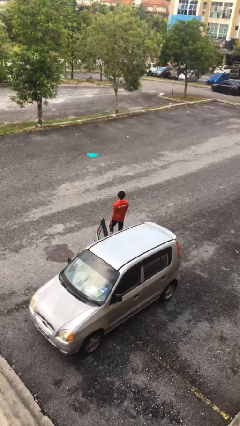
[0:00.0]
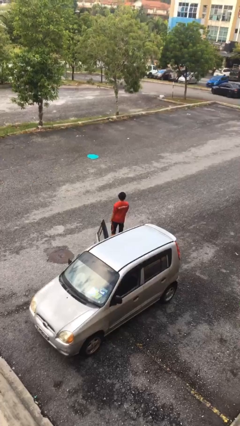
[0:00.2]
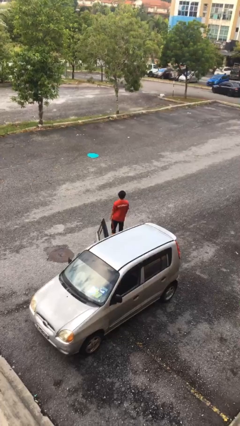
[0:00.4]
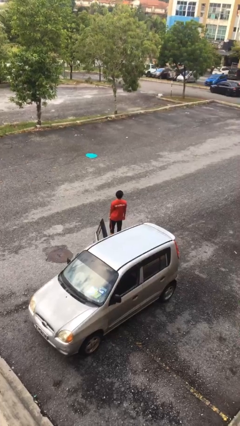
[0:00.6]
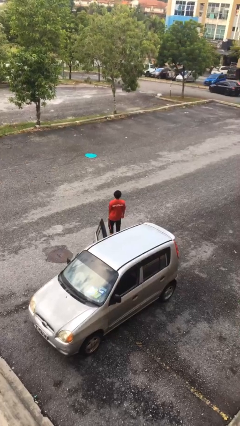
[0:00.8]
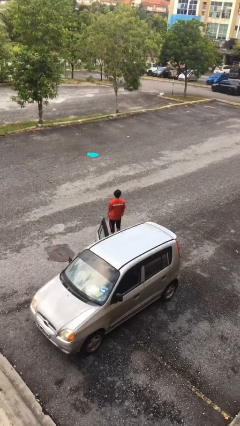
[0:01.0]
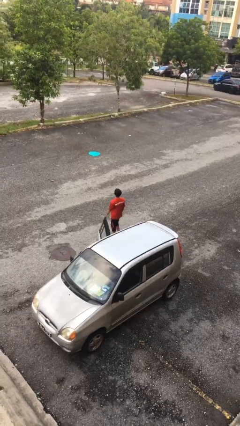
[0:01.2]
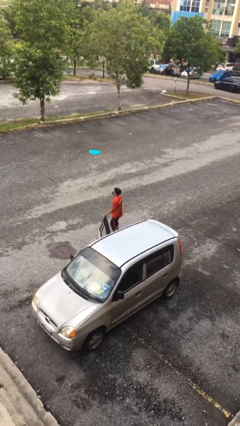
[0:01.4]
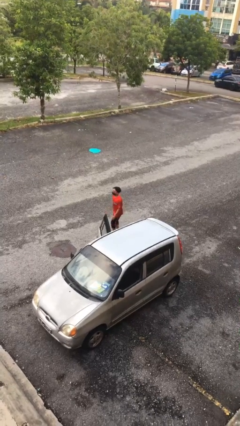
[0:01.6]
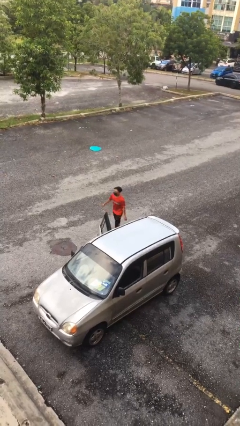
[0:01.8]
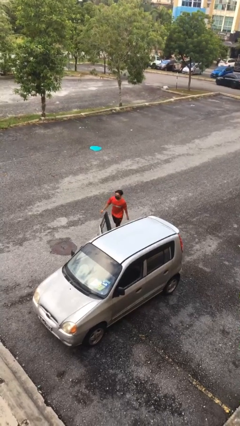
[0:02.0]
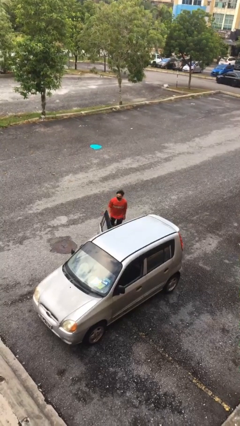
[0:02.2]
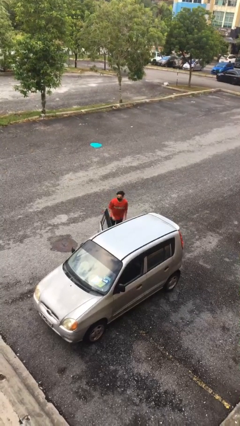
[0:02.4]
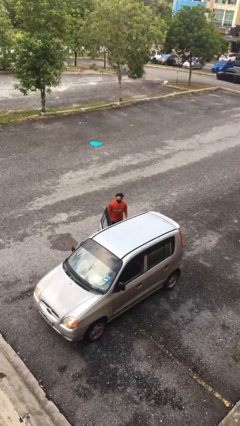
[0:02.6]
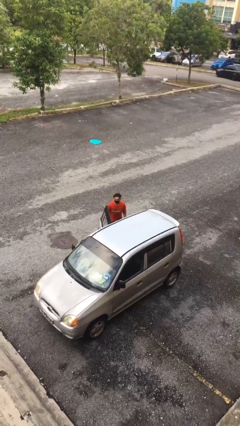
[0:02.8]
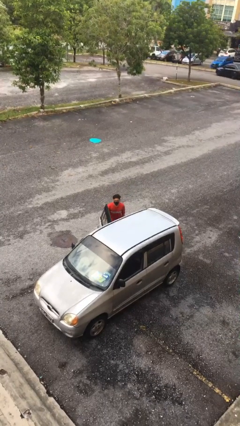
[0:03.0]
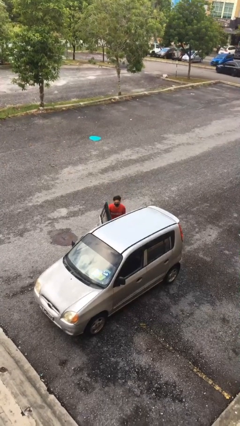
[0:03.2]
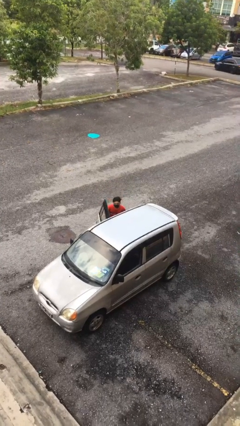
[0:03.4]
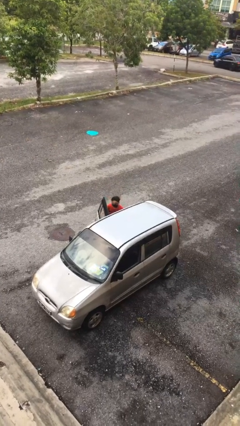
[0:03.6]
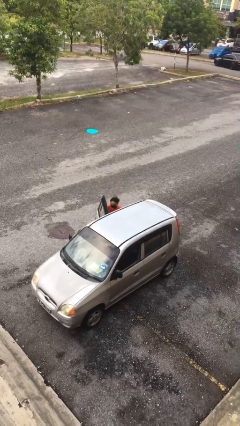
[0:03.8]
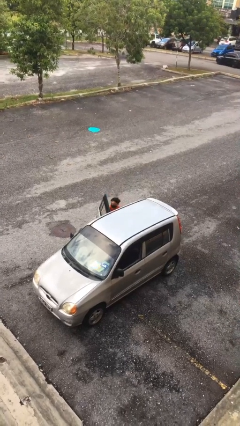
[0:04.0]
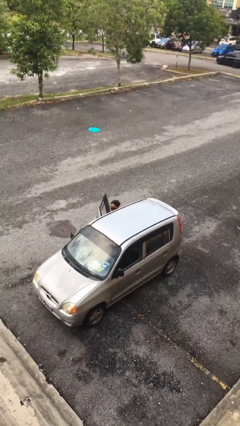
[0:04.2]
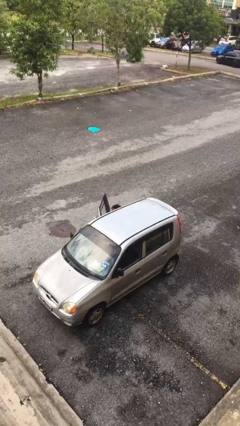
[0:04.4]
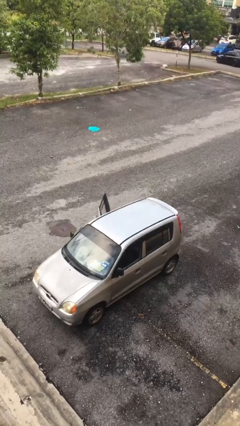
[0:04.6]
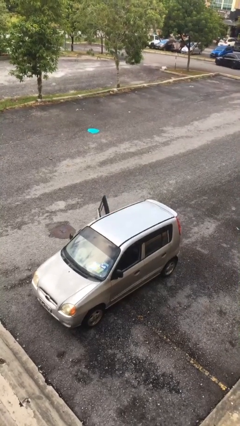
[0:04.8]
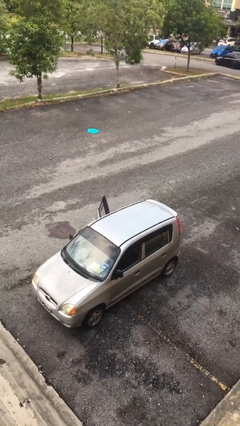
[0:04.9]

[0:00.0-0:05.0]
person enters car

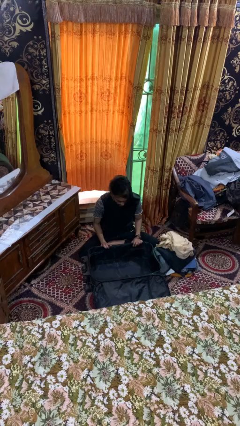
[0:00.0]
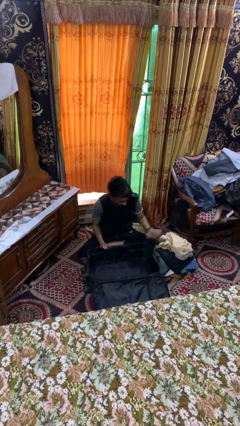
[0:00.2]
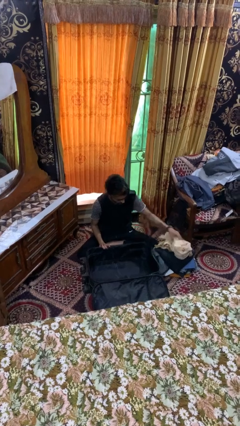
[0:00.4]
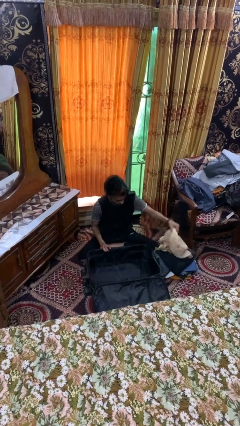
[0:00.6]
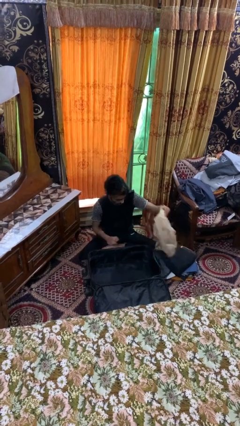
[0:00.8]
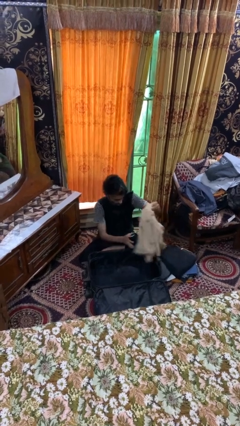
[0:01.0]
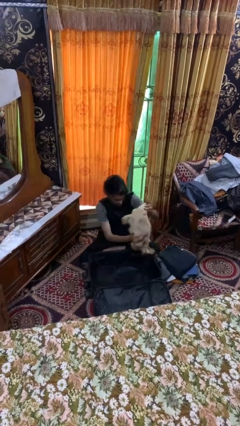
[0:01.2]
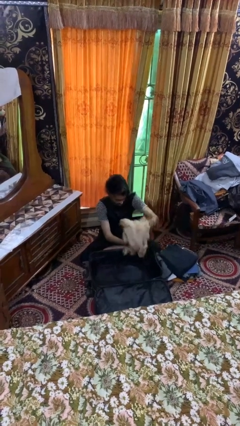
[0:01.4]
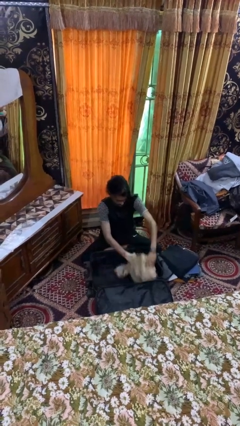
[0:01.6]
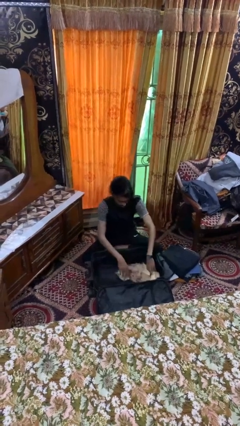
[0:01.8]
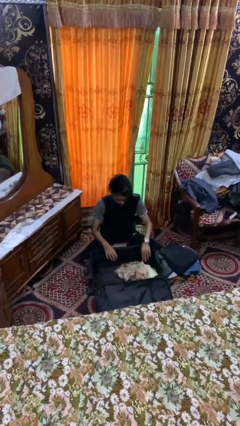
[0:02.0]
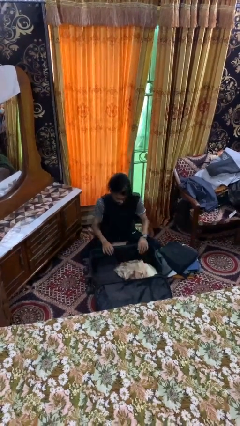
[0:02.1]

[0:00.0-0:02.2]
person loads clothes into suitcase

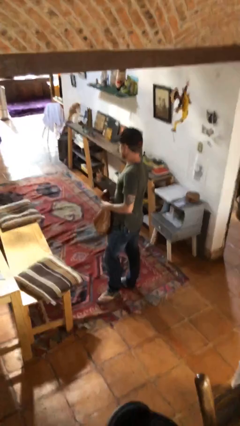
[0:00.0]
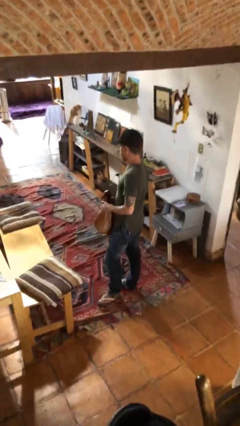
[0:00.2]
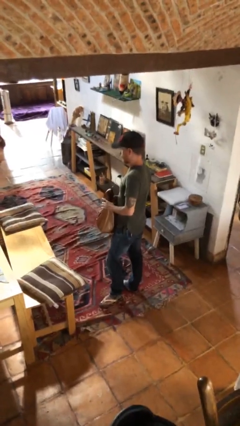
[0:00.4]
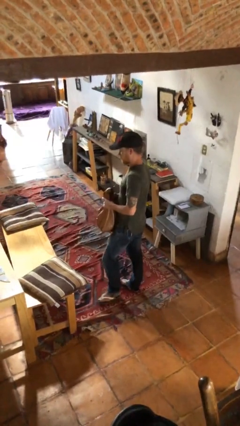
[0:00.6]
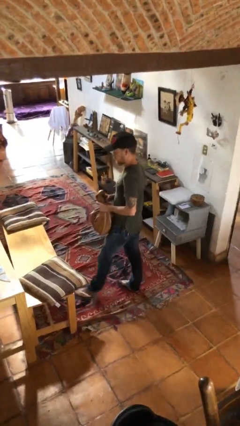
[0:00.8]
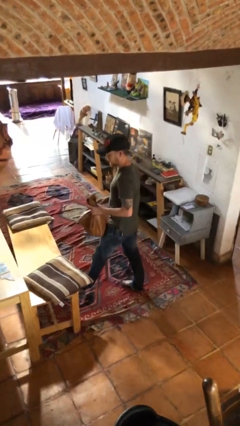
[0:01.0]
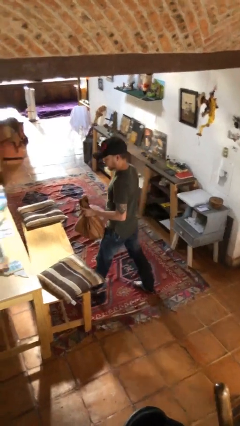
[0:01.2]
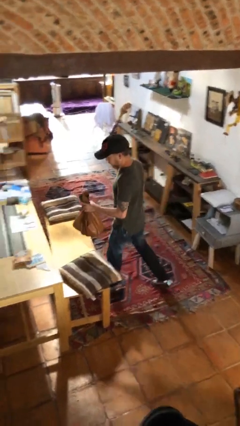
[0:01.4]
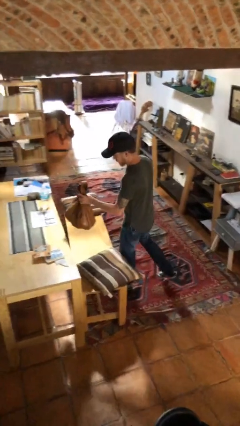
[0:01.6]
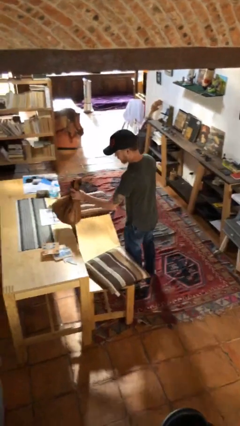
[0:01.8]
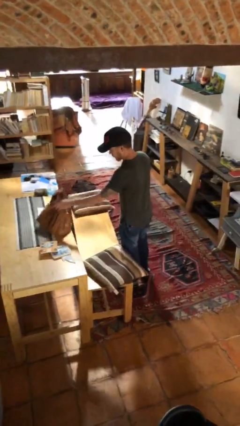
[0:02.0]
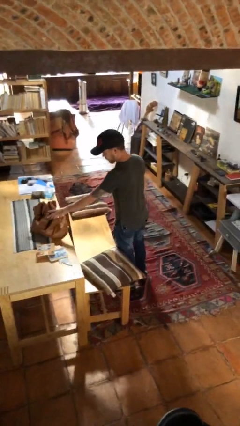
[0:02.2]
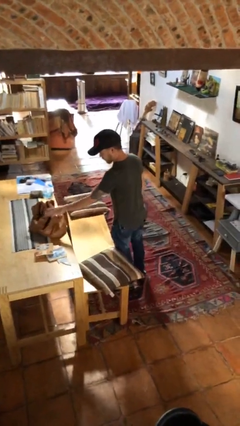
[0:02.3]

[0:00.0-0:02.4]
person puts down object on table

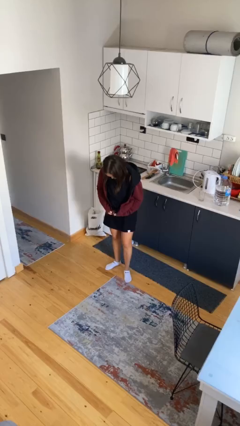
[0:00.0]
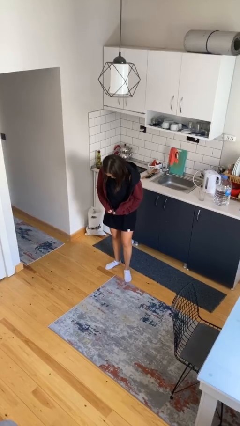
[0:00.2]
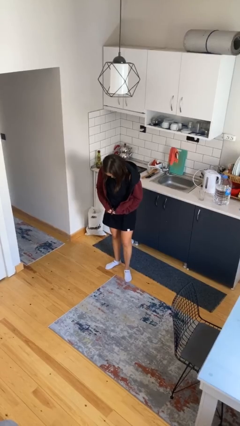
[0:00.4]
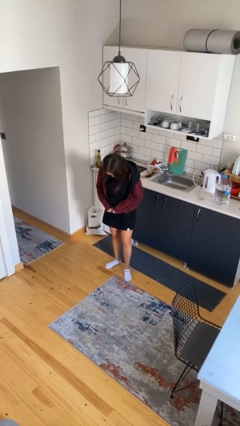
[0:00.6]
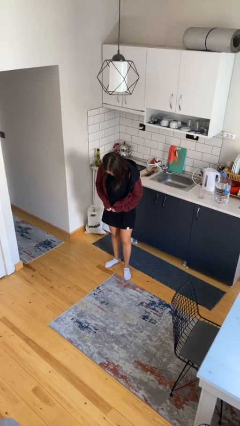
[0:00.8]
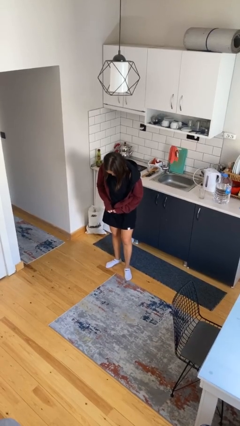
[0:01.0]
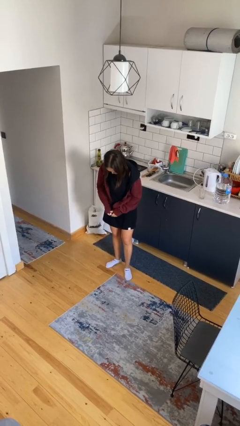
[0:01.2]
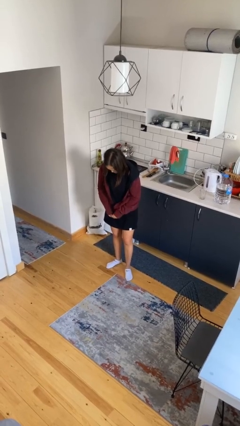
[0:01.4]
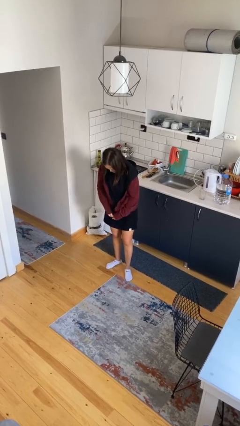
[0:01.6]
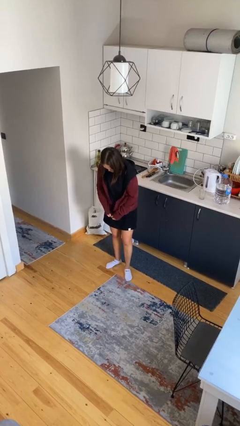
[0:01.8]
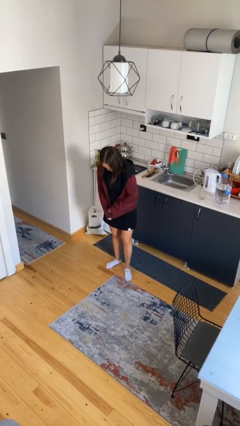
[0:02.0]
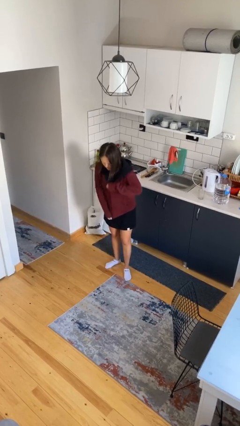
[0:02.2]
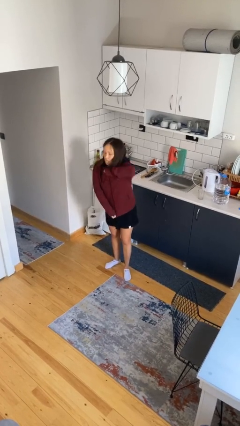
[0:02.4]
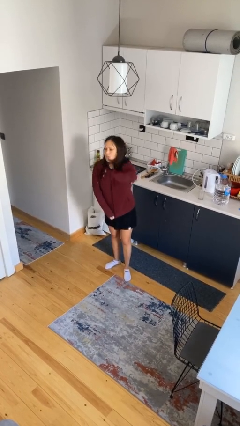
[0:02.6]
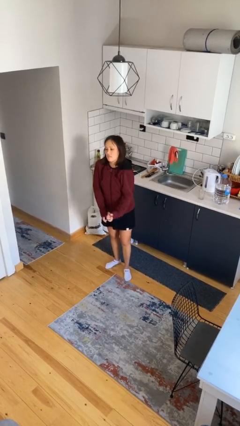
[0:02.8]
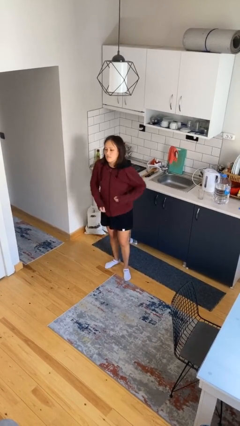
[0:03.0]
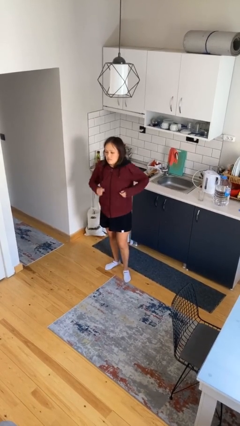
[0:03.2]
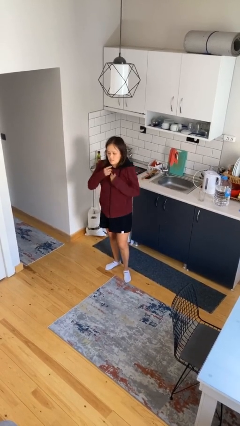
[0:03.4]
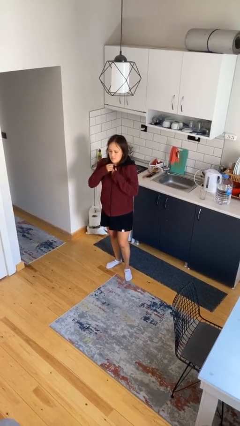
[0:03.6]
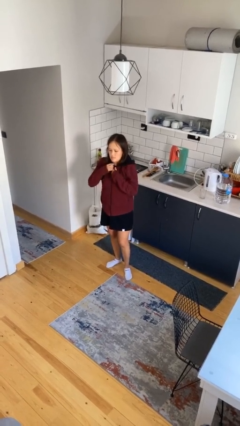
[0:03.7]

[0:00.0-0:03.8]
person zips up jacket

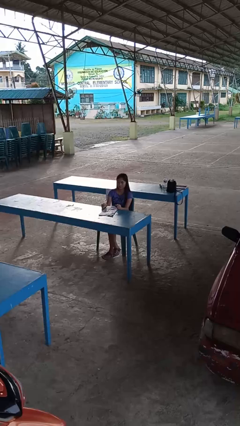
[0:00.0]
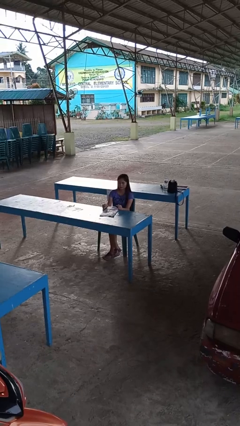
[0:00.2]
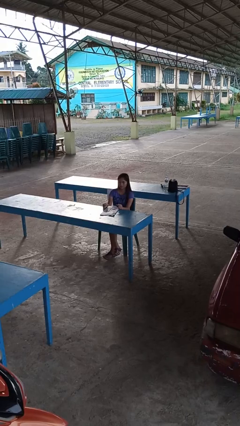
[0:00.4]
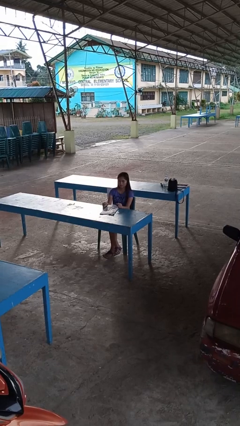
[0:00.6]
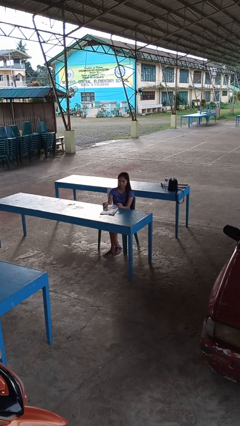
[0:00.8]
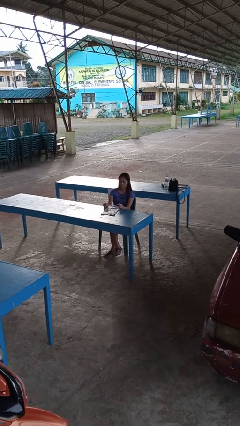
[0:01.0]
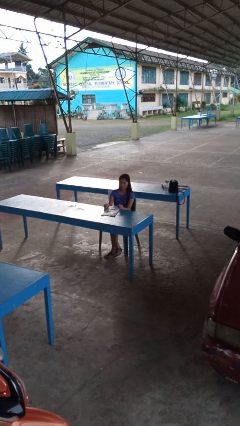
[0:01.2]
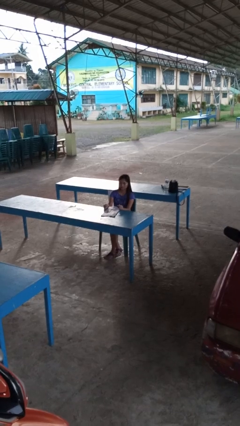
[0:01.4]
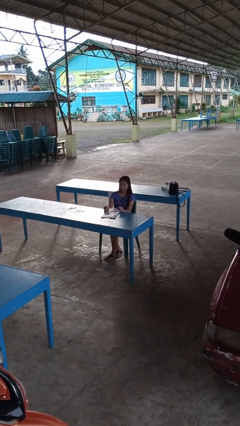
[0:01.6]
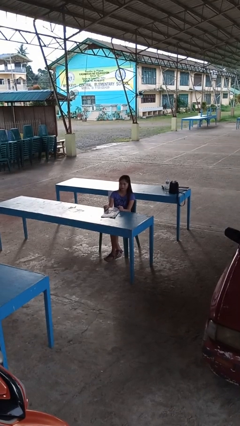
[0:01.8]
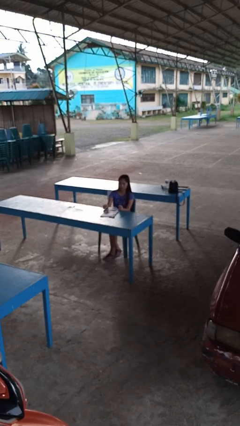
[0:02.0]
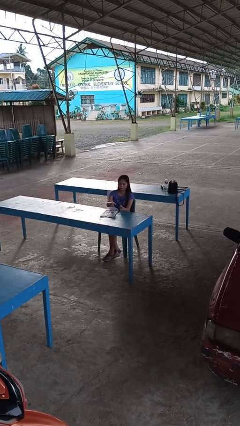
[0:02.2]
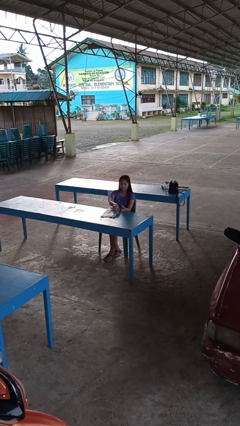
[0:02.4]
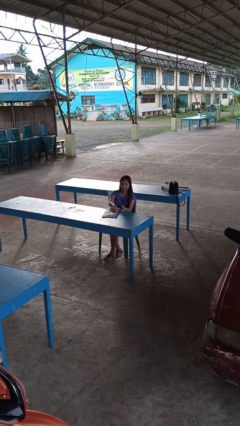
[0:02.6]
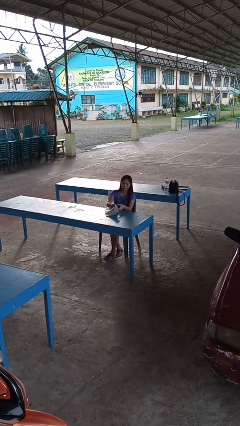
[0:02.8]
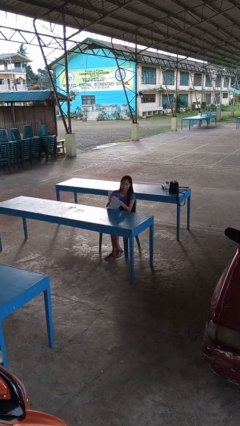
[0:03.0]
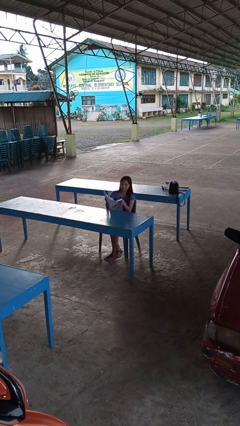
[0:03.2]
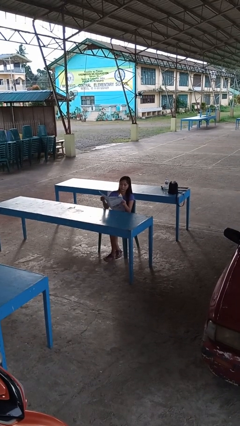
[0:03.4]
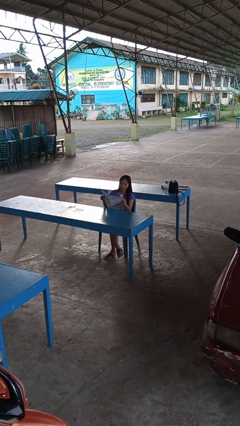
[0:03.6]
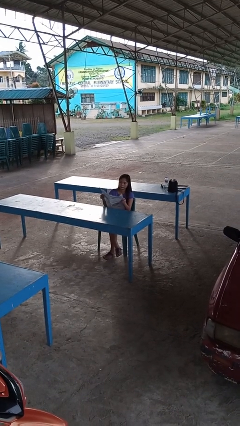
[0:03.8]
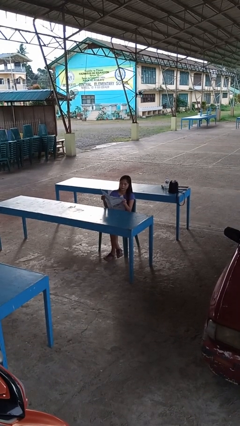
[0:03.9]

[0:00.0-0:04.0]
person reads newspaper

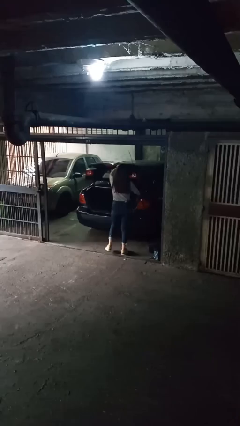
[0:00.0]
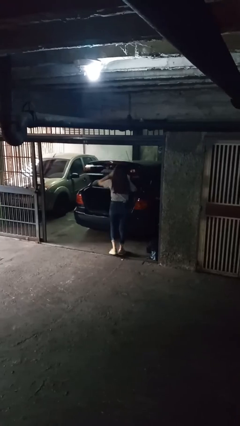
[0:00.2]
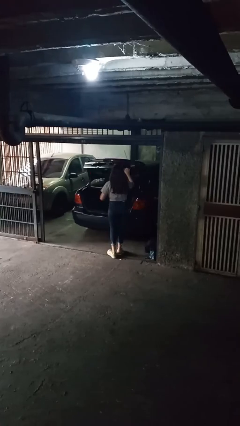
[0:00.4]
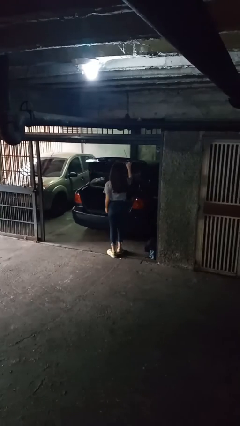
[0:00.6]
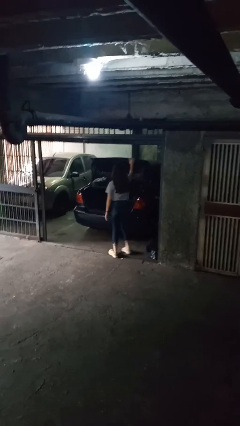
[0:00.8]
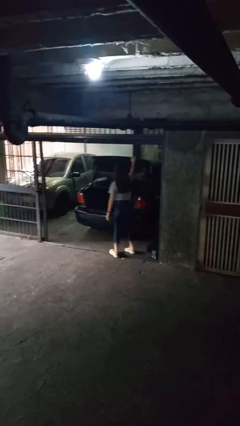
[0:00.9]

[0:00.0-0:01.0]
person opens car trunk
